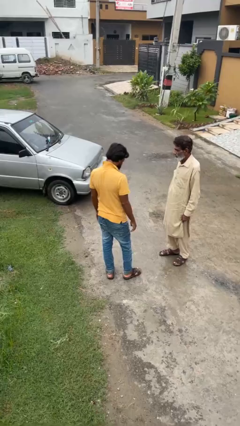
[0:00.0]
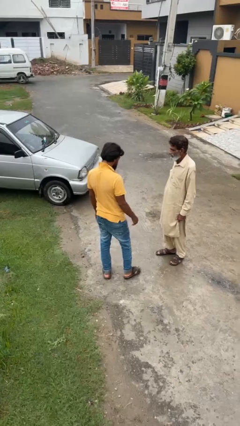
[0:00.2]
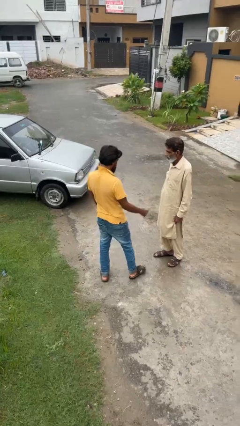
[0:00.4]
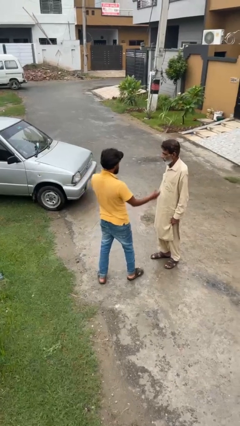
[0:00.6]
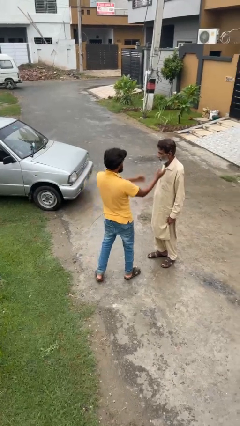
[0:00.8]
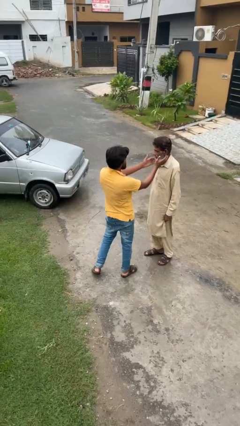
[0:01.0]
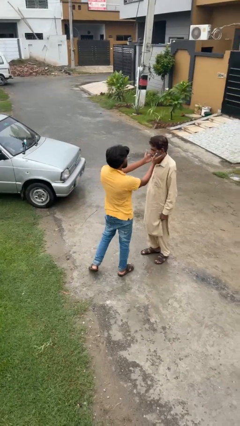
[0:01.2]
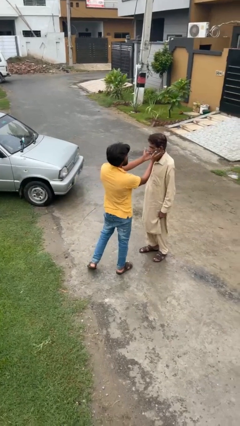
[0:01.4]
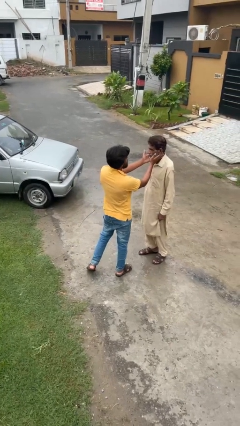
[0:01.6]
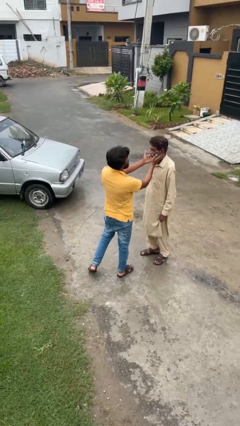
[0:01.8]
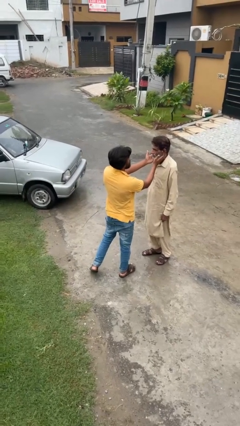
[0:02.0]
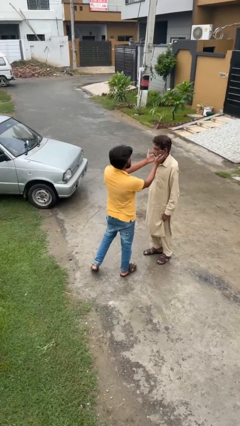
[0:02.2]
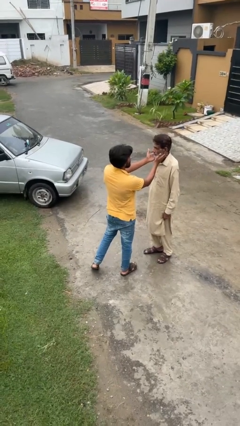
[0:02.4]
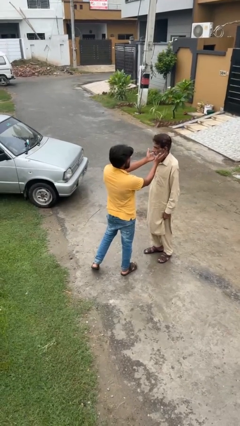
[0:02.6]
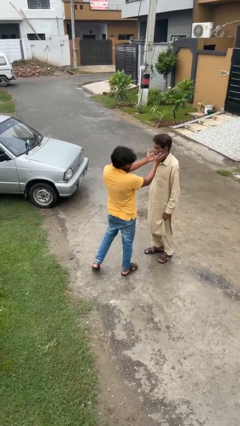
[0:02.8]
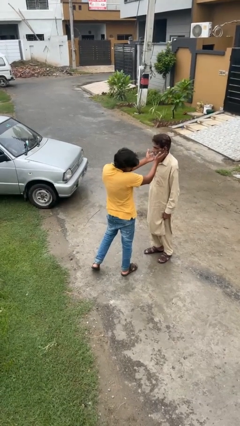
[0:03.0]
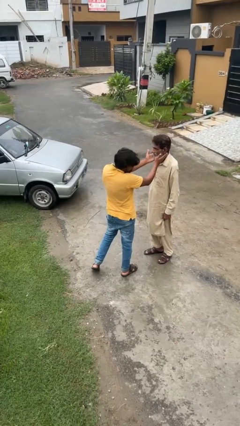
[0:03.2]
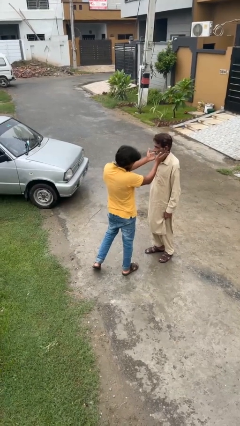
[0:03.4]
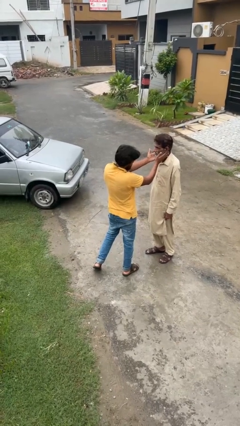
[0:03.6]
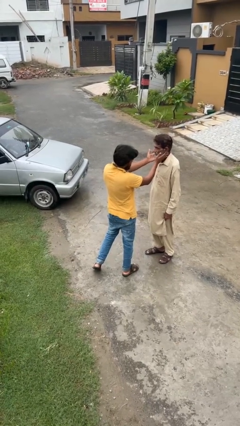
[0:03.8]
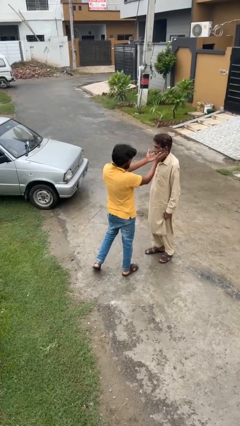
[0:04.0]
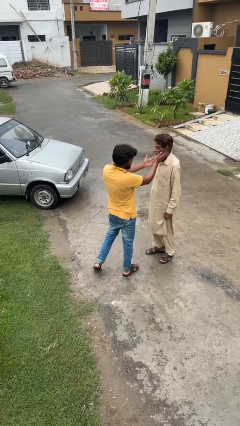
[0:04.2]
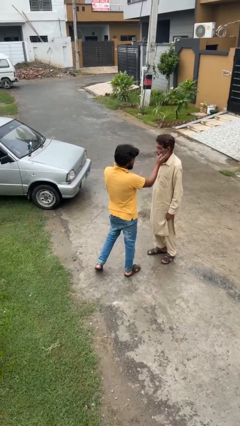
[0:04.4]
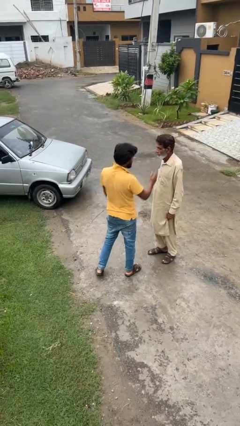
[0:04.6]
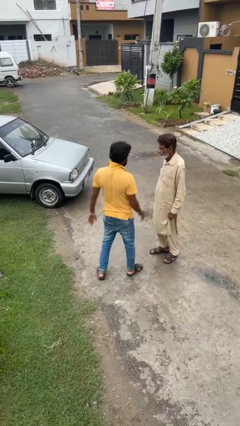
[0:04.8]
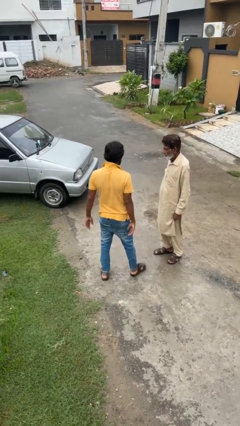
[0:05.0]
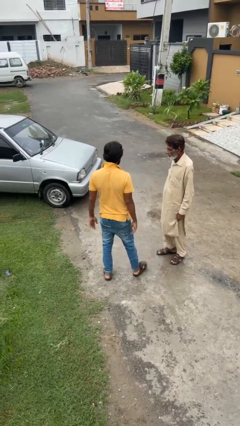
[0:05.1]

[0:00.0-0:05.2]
person touches face of person

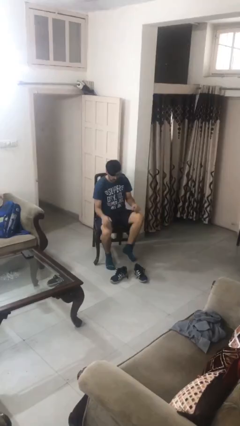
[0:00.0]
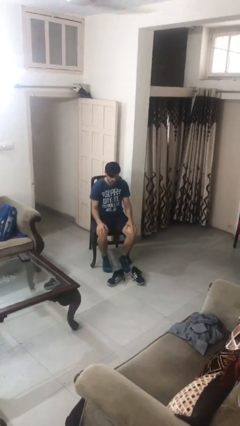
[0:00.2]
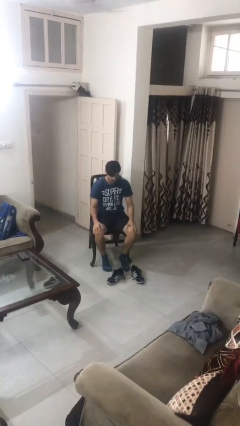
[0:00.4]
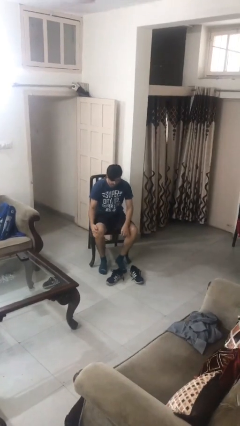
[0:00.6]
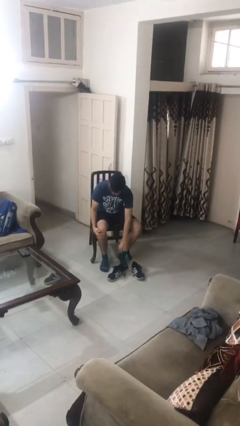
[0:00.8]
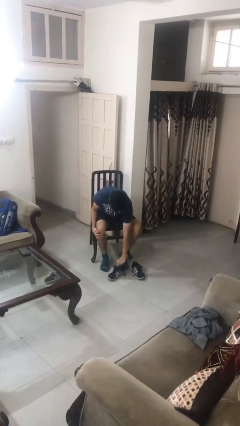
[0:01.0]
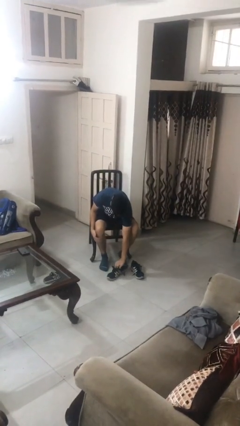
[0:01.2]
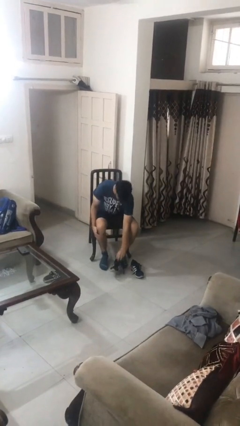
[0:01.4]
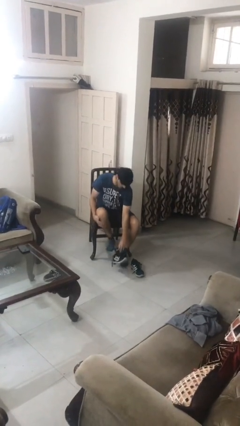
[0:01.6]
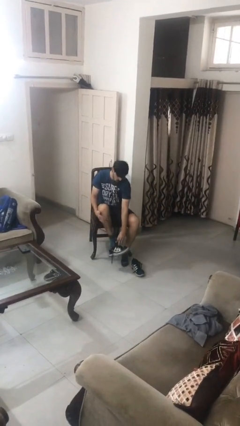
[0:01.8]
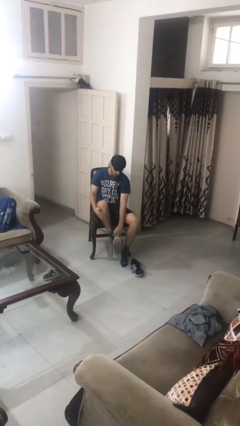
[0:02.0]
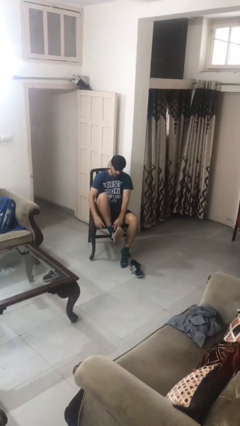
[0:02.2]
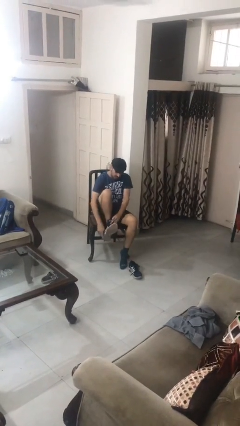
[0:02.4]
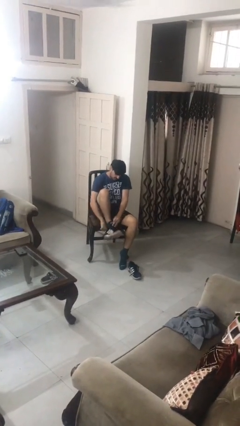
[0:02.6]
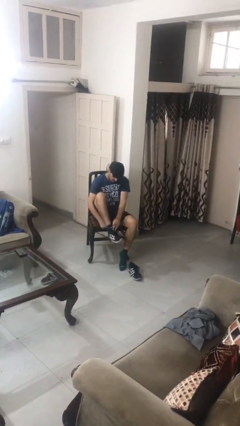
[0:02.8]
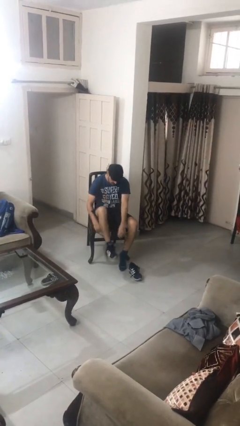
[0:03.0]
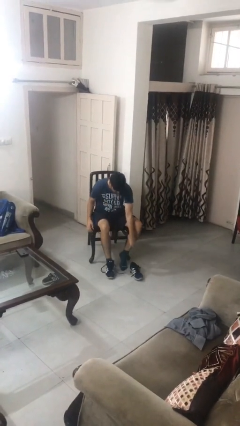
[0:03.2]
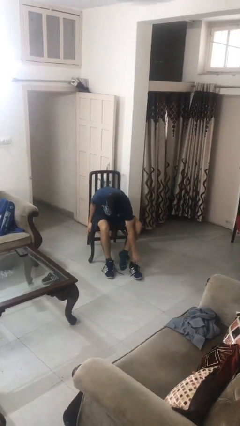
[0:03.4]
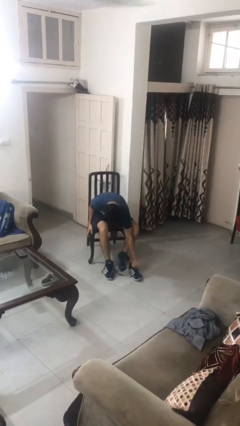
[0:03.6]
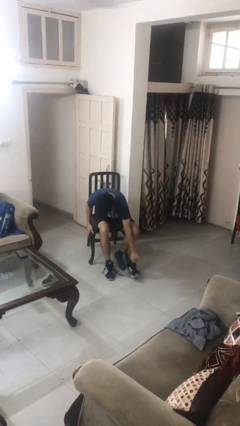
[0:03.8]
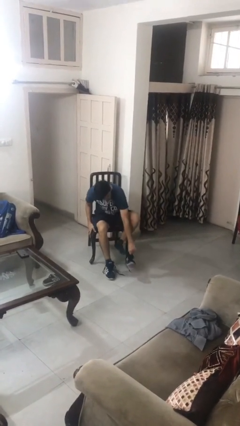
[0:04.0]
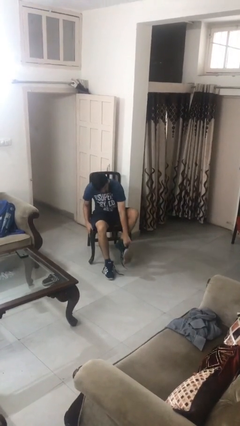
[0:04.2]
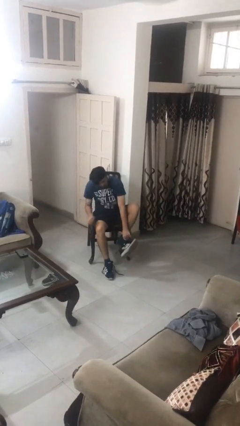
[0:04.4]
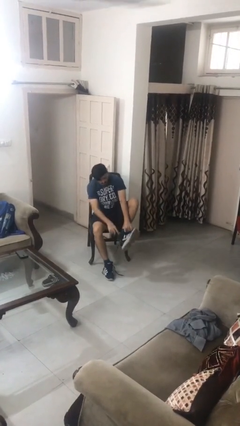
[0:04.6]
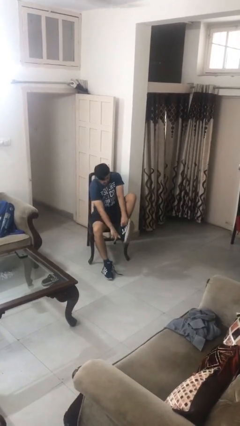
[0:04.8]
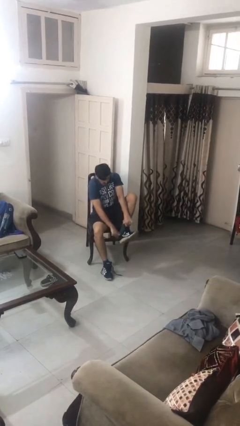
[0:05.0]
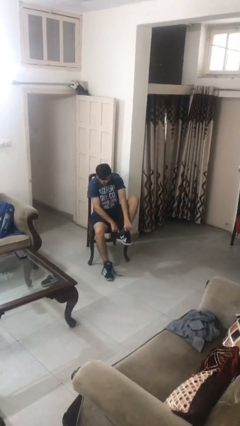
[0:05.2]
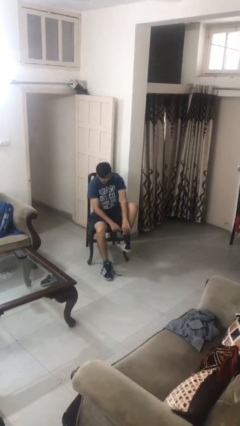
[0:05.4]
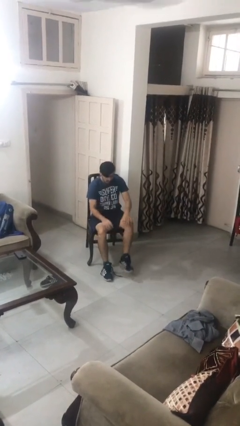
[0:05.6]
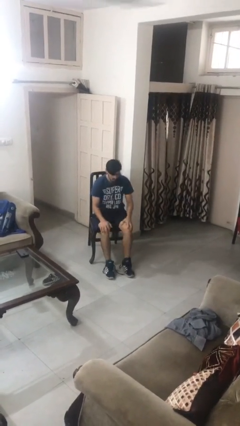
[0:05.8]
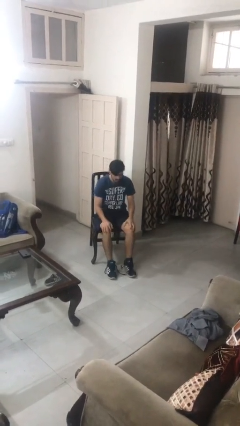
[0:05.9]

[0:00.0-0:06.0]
person puts on shoes

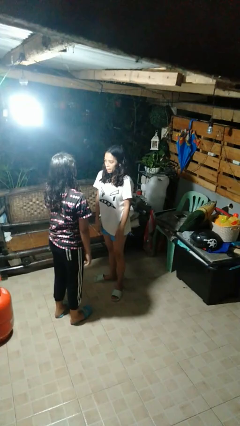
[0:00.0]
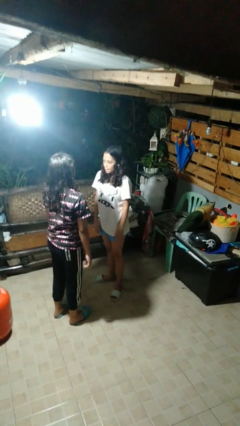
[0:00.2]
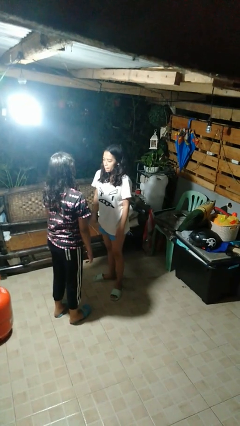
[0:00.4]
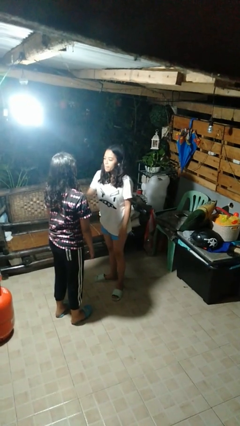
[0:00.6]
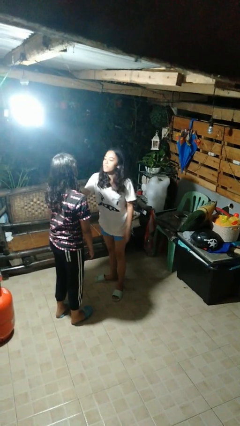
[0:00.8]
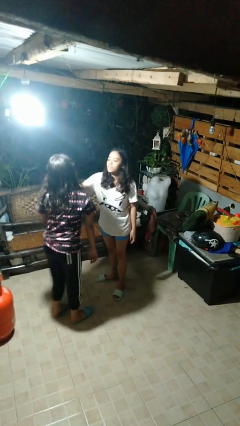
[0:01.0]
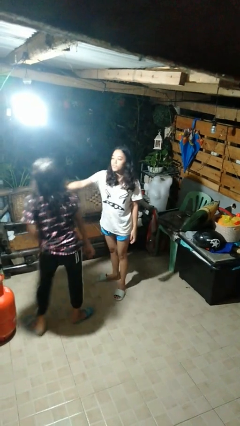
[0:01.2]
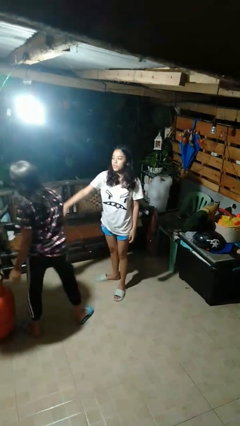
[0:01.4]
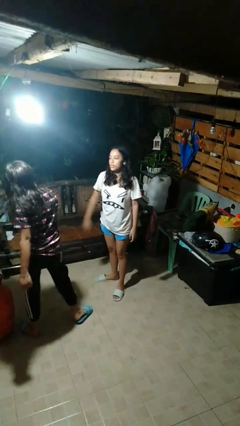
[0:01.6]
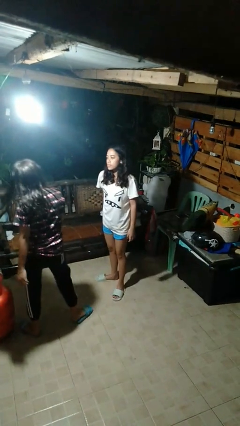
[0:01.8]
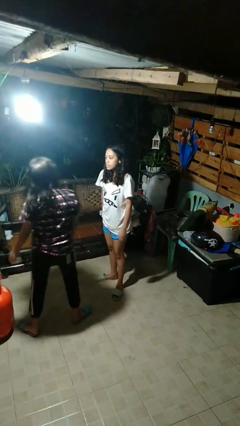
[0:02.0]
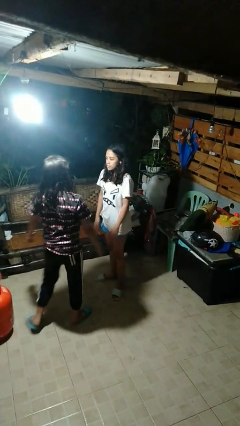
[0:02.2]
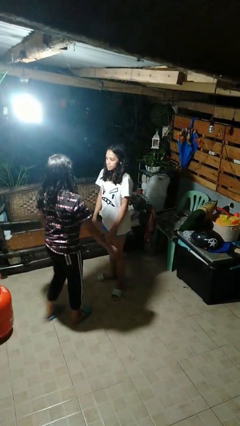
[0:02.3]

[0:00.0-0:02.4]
person shoves person

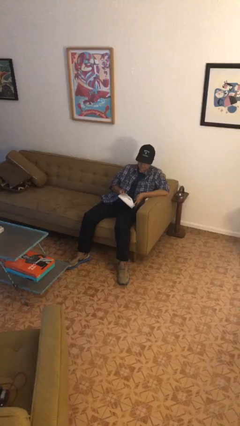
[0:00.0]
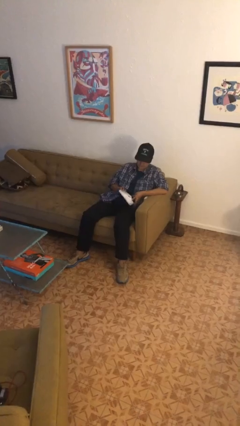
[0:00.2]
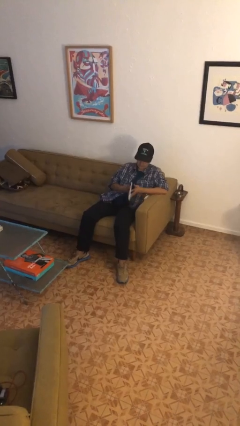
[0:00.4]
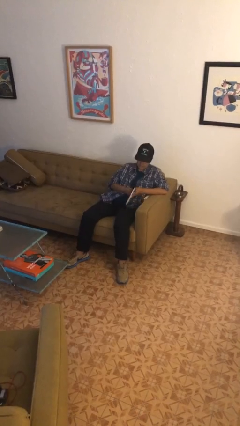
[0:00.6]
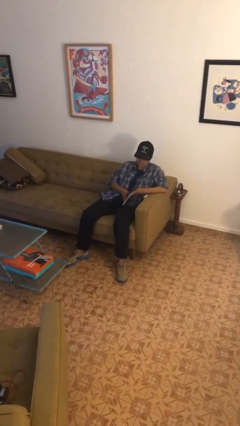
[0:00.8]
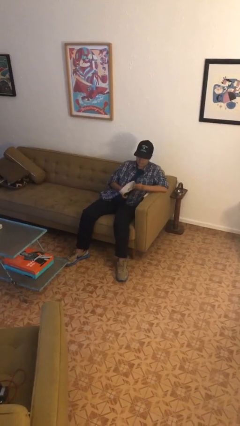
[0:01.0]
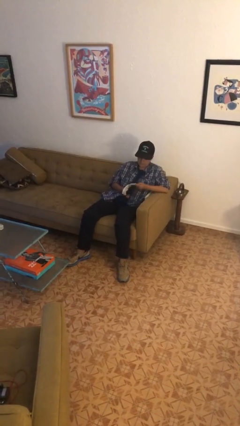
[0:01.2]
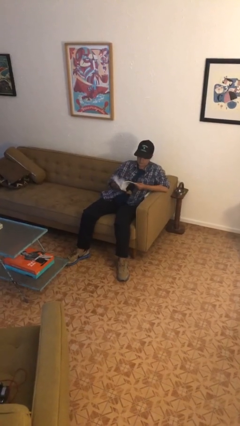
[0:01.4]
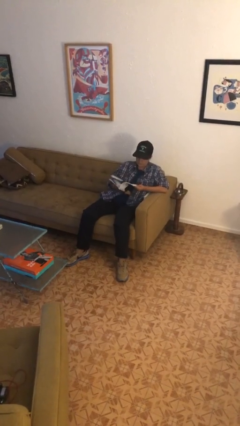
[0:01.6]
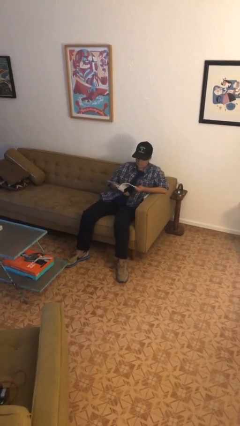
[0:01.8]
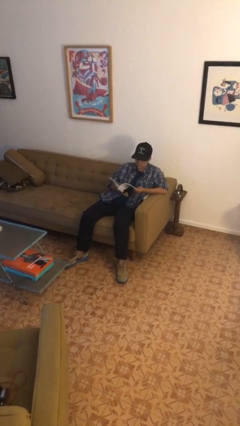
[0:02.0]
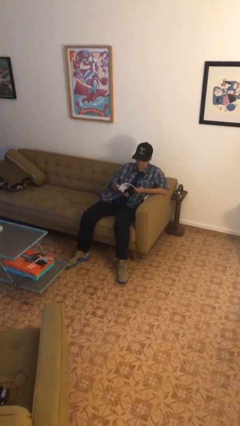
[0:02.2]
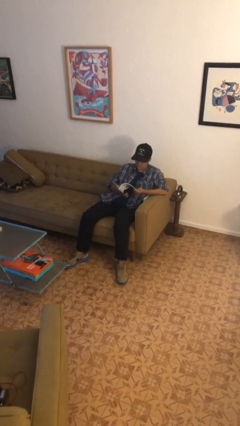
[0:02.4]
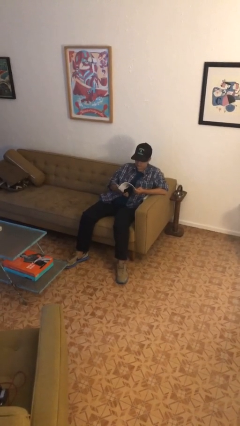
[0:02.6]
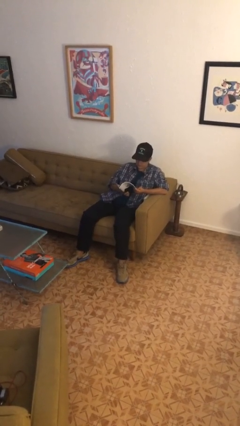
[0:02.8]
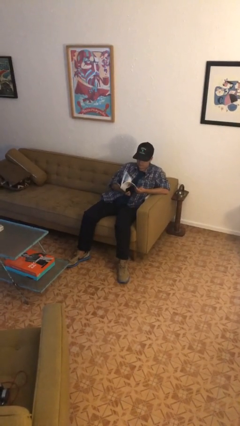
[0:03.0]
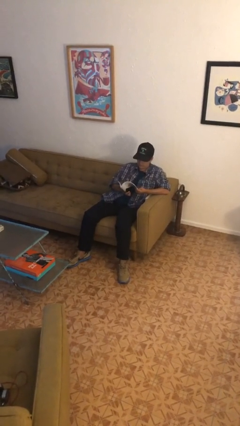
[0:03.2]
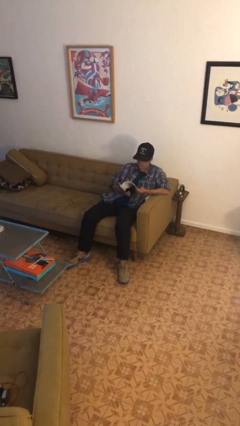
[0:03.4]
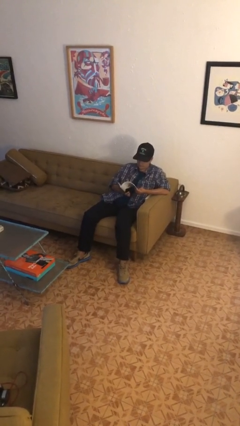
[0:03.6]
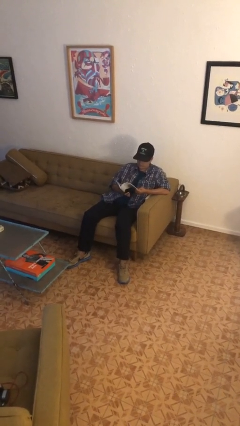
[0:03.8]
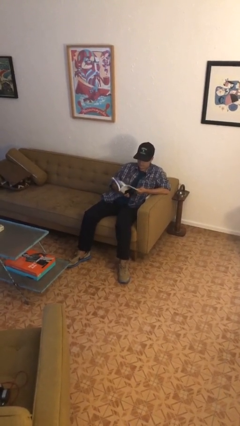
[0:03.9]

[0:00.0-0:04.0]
person reads magazine
